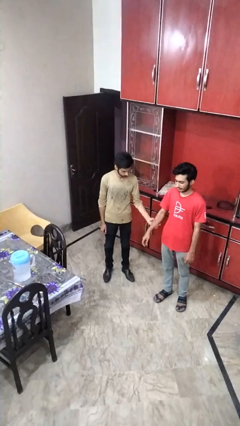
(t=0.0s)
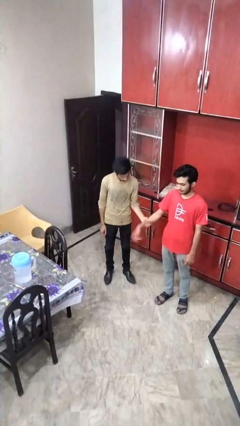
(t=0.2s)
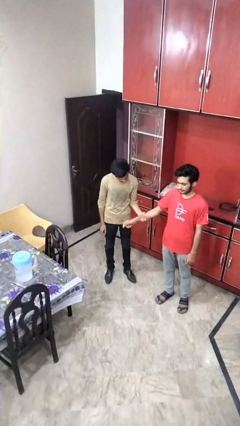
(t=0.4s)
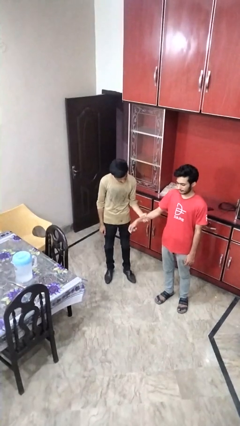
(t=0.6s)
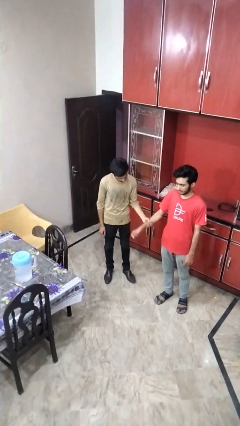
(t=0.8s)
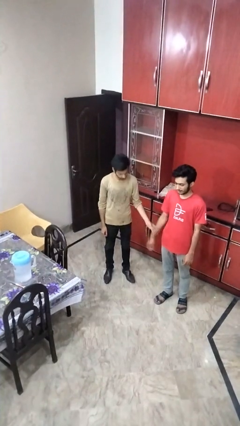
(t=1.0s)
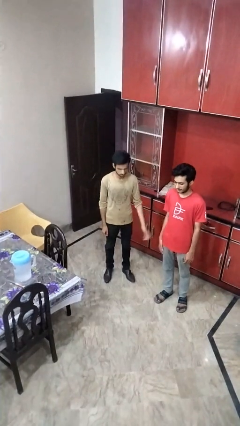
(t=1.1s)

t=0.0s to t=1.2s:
person grabs person by forearm

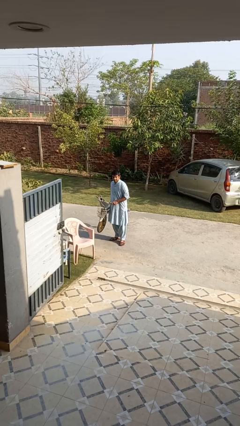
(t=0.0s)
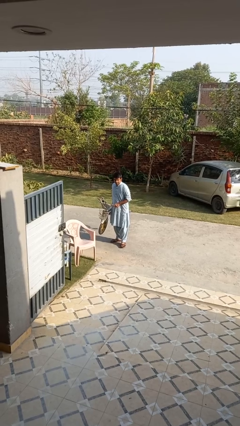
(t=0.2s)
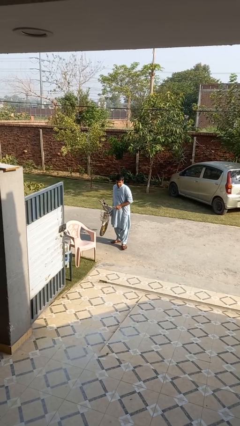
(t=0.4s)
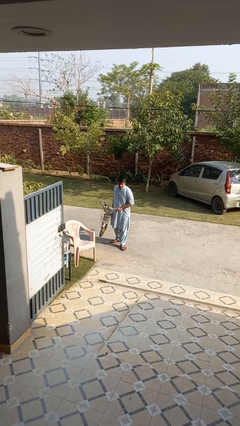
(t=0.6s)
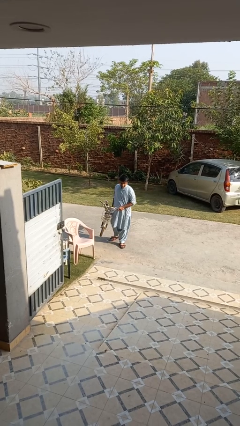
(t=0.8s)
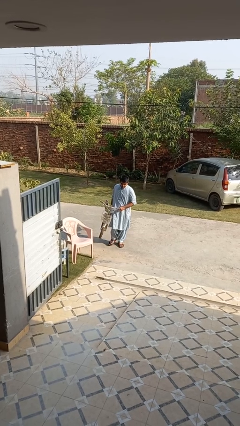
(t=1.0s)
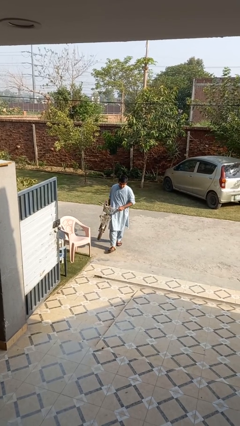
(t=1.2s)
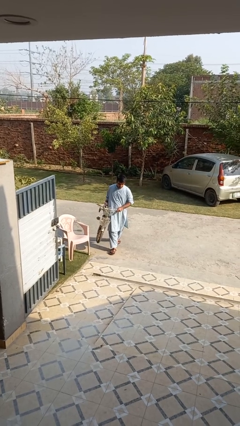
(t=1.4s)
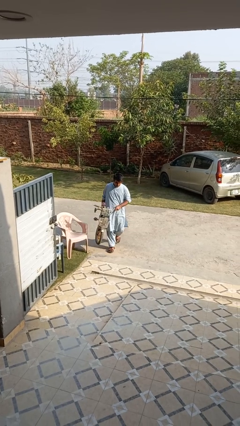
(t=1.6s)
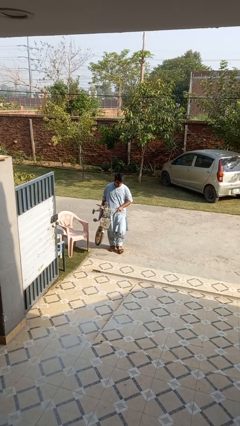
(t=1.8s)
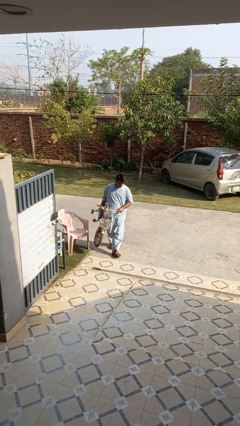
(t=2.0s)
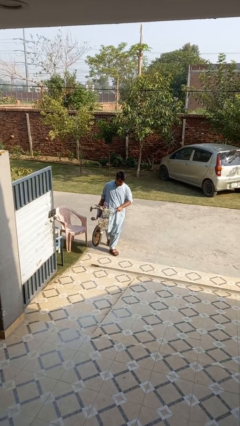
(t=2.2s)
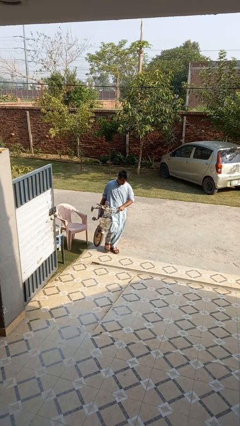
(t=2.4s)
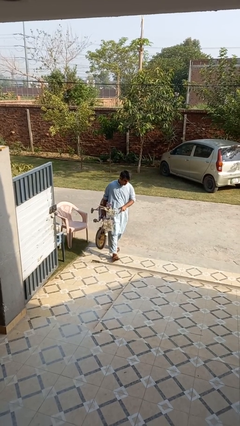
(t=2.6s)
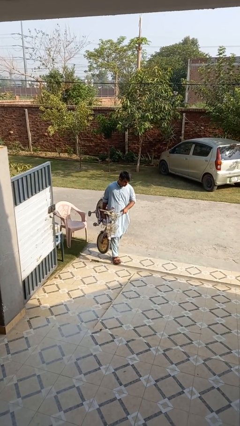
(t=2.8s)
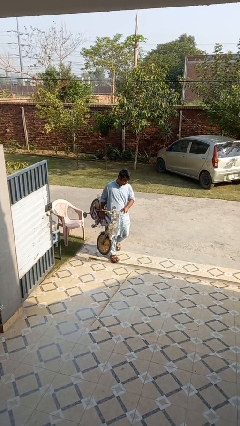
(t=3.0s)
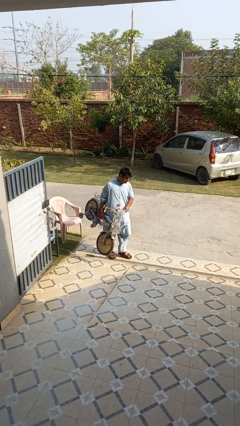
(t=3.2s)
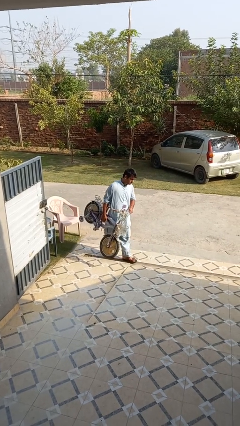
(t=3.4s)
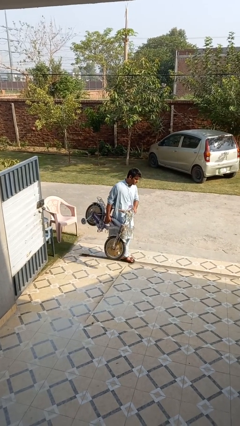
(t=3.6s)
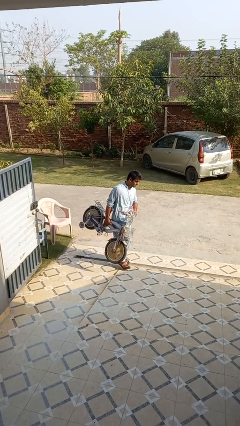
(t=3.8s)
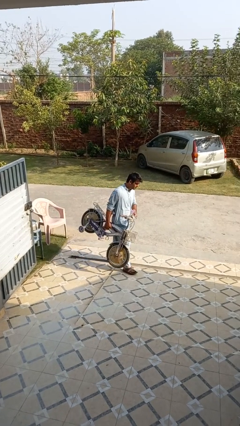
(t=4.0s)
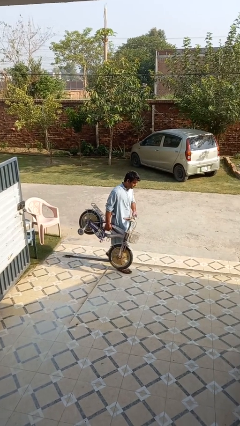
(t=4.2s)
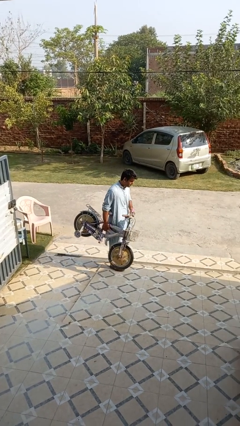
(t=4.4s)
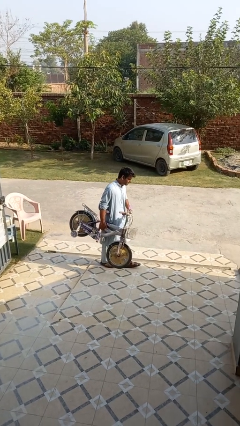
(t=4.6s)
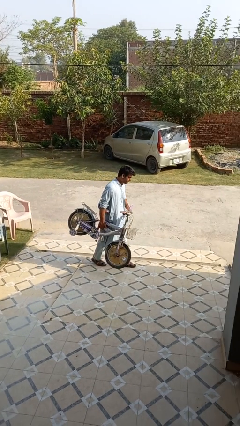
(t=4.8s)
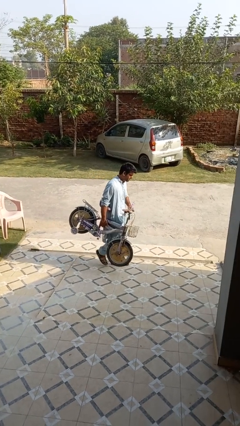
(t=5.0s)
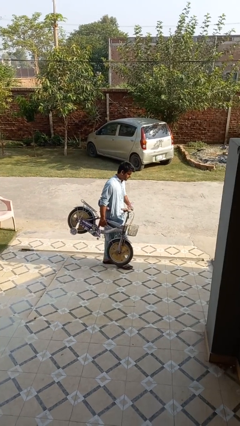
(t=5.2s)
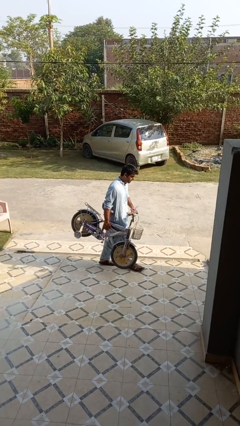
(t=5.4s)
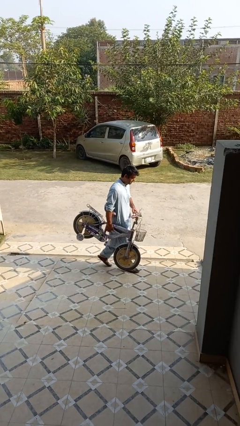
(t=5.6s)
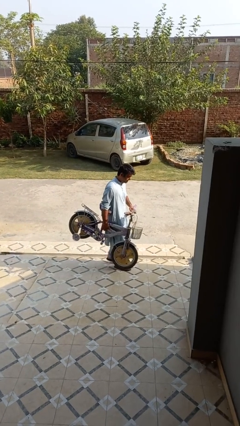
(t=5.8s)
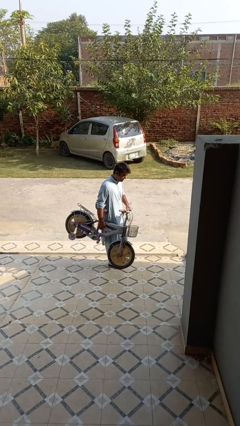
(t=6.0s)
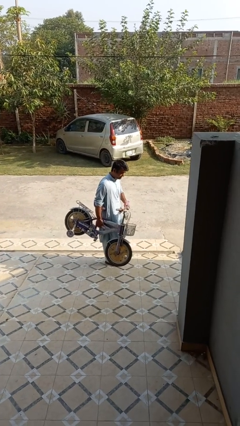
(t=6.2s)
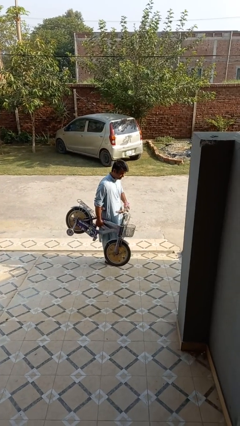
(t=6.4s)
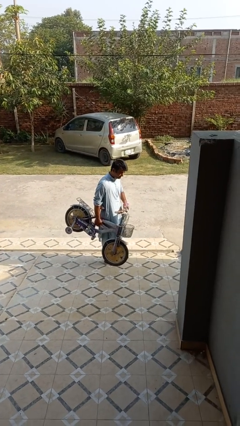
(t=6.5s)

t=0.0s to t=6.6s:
person carries bicycle

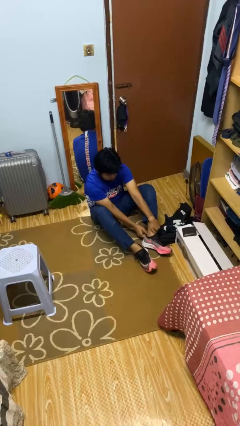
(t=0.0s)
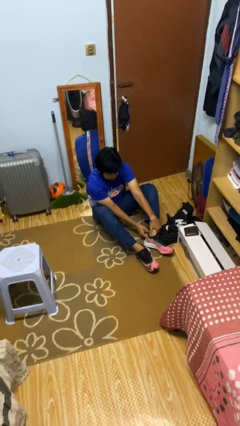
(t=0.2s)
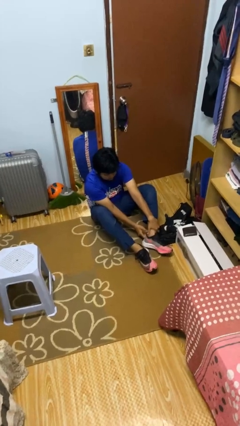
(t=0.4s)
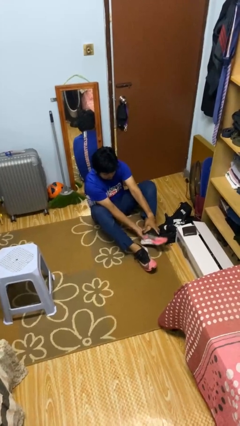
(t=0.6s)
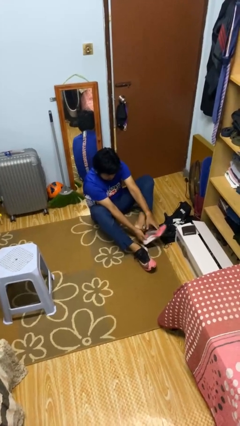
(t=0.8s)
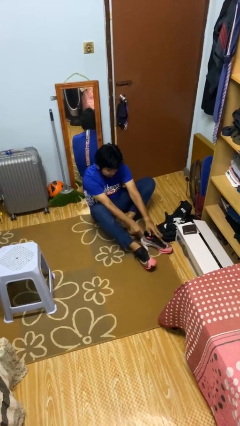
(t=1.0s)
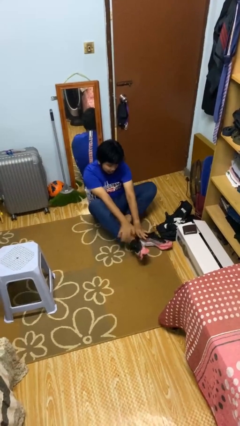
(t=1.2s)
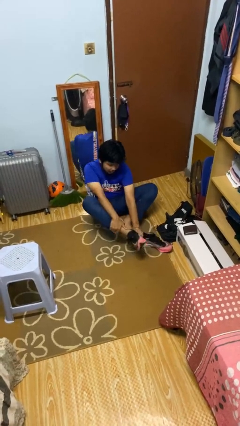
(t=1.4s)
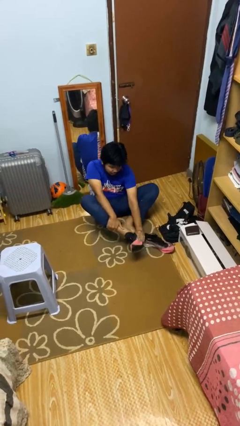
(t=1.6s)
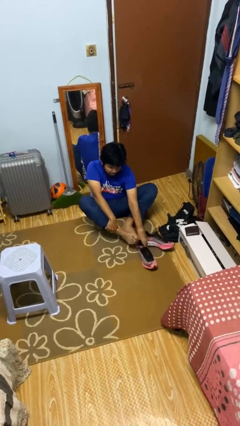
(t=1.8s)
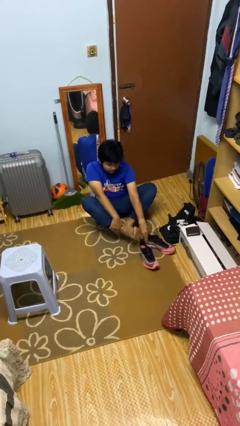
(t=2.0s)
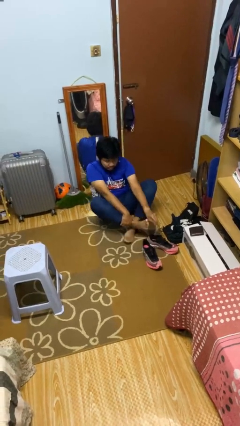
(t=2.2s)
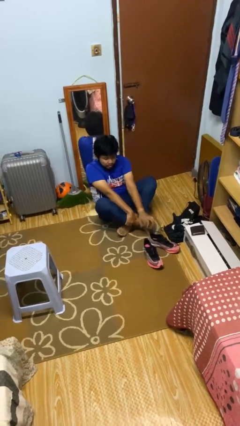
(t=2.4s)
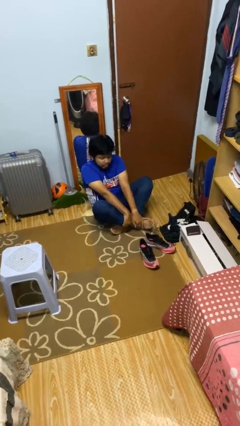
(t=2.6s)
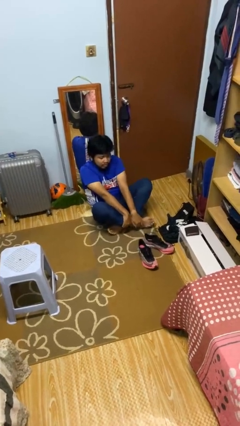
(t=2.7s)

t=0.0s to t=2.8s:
person takes off shoes

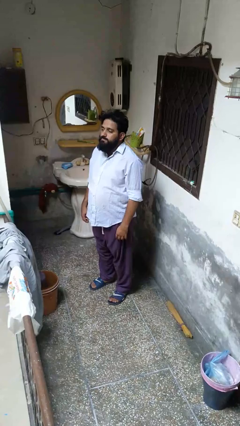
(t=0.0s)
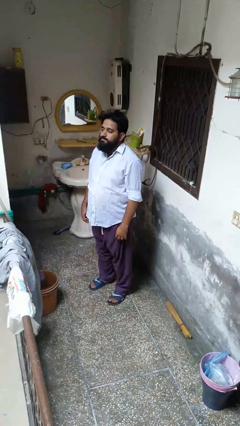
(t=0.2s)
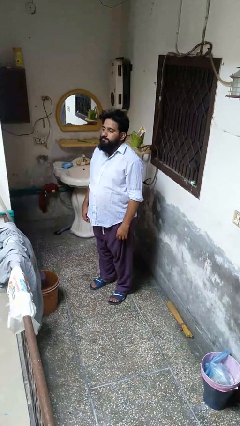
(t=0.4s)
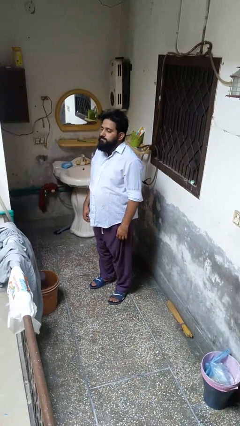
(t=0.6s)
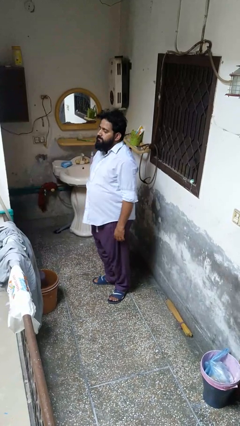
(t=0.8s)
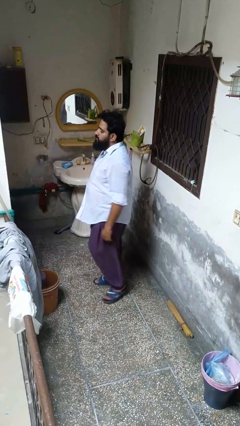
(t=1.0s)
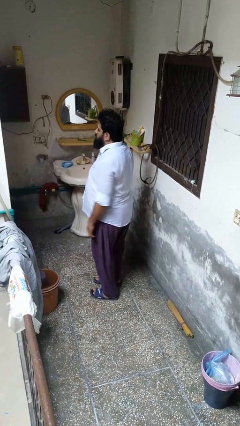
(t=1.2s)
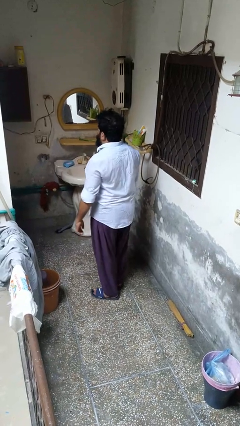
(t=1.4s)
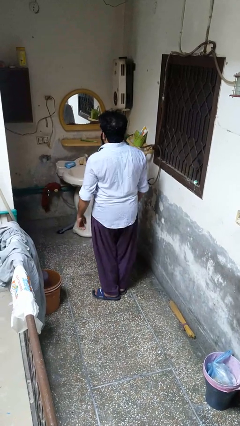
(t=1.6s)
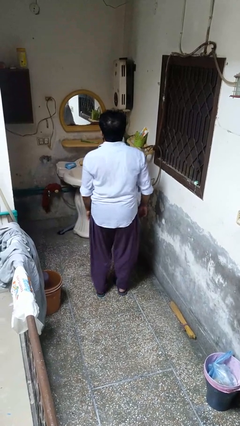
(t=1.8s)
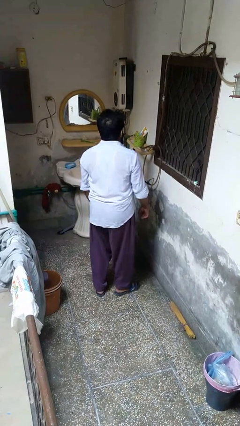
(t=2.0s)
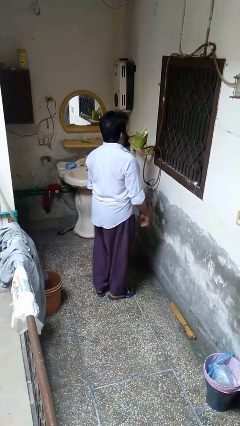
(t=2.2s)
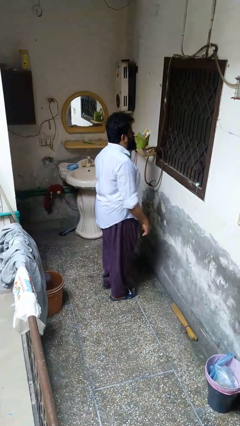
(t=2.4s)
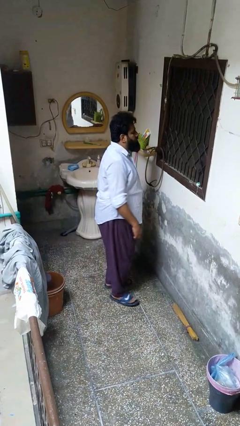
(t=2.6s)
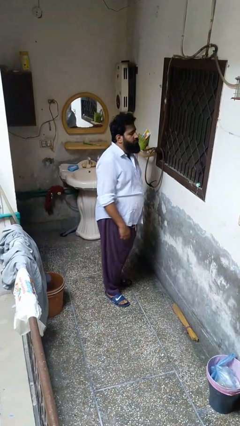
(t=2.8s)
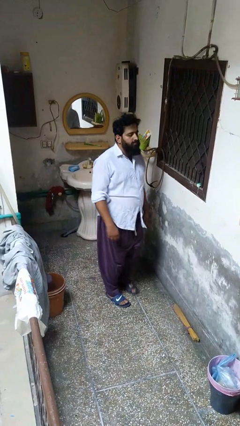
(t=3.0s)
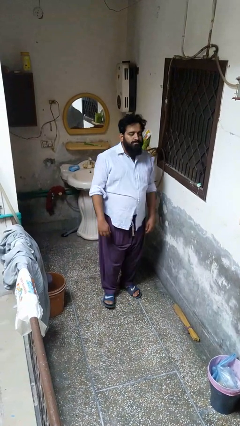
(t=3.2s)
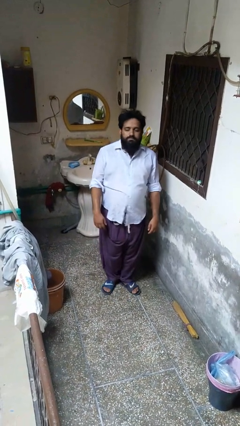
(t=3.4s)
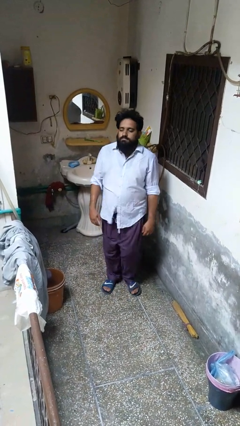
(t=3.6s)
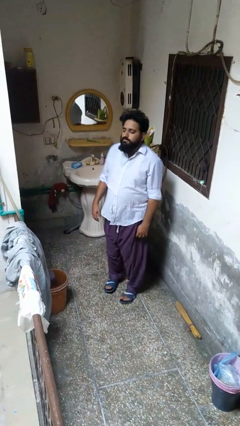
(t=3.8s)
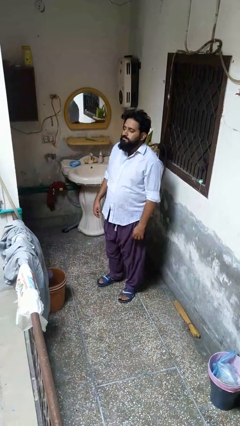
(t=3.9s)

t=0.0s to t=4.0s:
person twirls

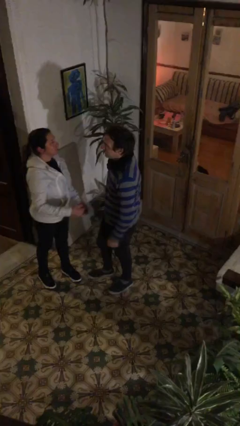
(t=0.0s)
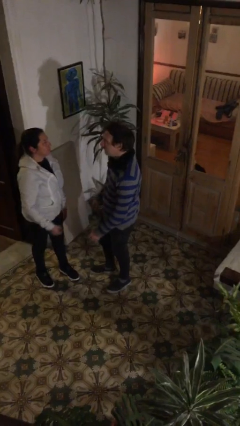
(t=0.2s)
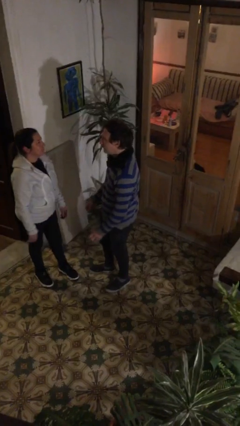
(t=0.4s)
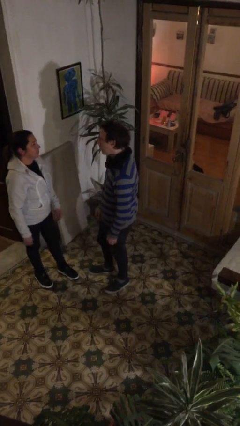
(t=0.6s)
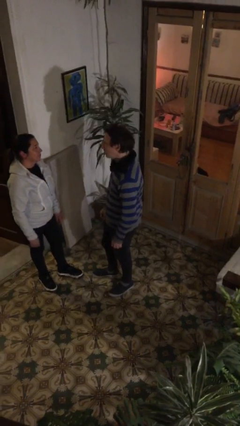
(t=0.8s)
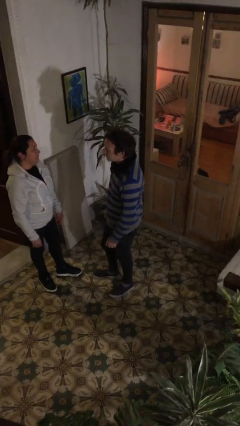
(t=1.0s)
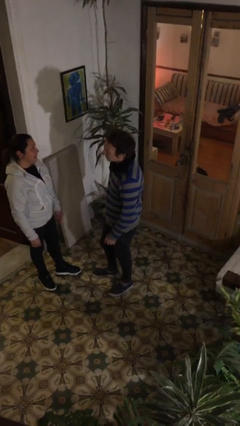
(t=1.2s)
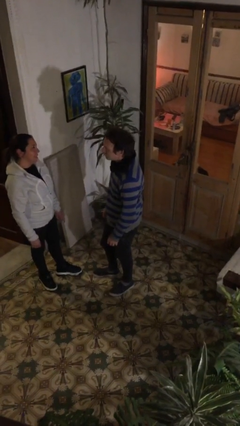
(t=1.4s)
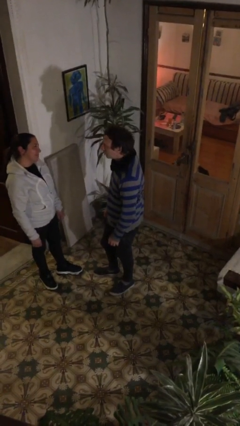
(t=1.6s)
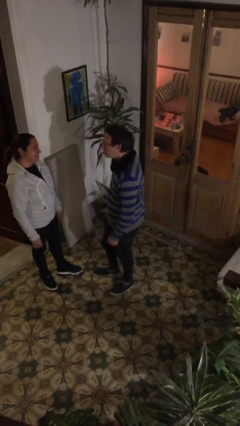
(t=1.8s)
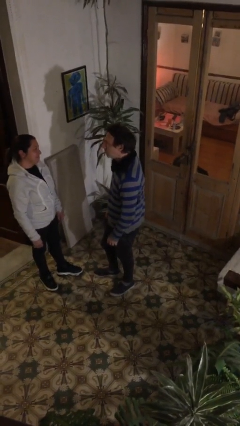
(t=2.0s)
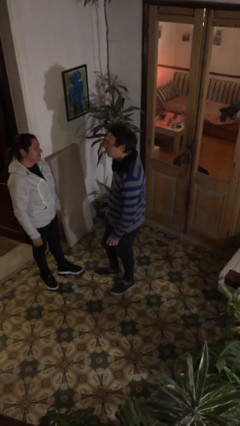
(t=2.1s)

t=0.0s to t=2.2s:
person talks to person

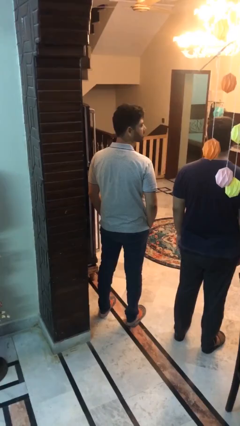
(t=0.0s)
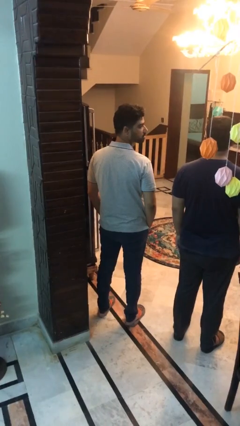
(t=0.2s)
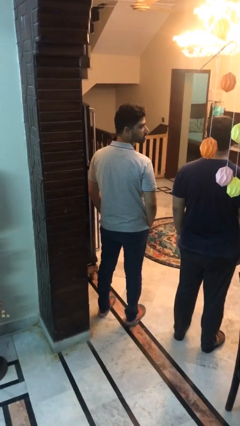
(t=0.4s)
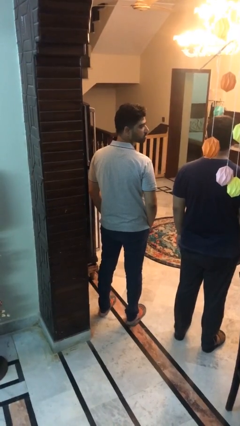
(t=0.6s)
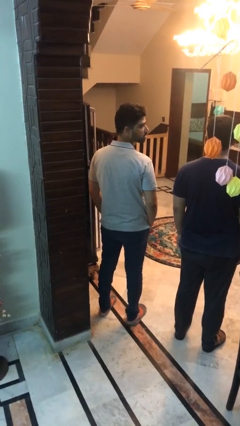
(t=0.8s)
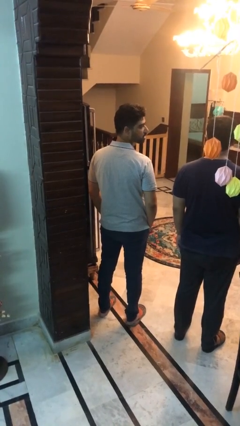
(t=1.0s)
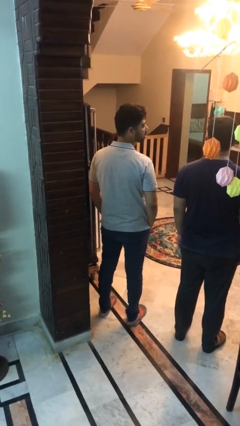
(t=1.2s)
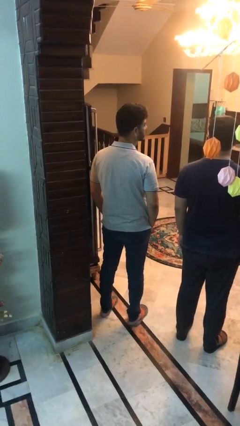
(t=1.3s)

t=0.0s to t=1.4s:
person looks over shoulder
